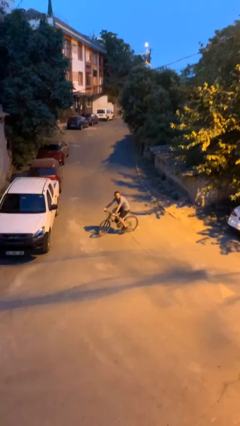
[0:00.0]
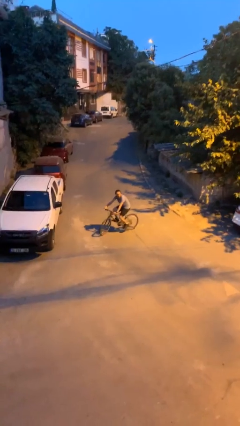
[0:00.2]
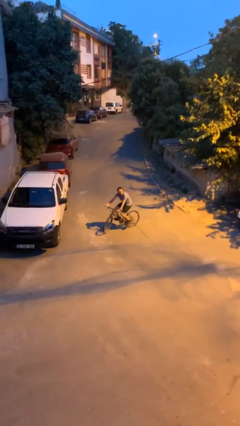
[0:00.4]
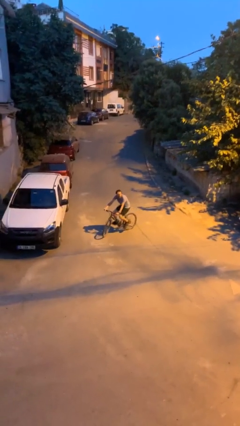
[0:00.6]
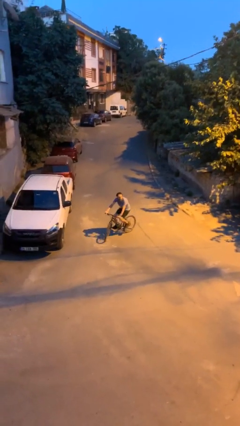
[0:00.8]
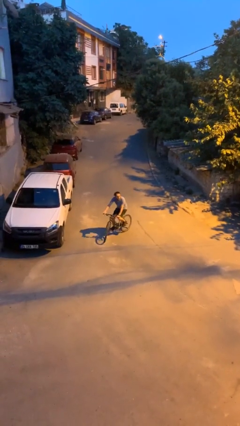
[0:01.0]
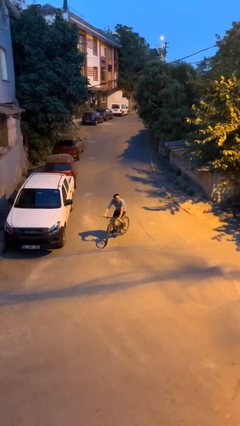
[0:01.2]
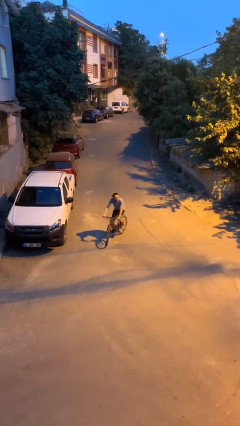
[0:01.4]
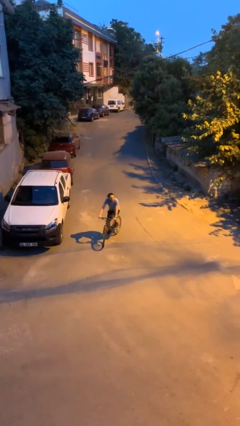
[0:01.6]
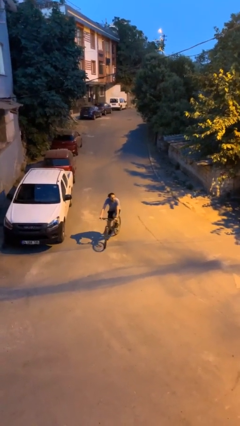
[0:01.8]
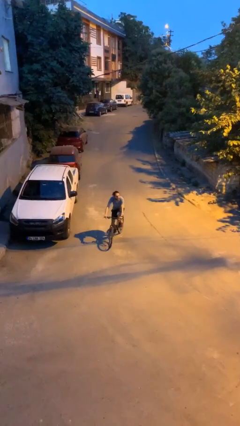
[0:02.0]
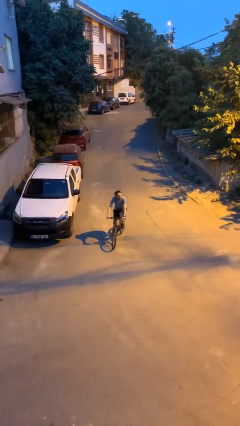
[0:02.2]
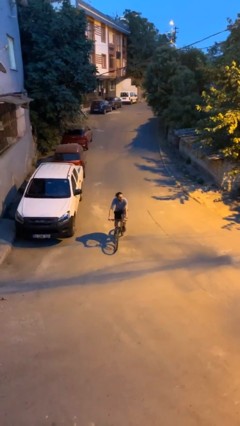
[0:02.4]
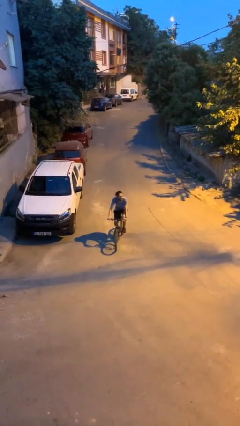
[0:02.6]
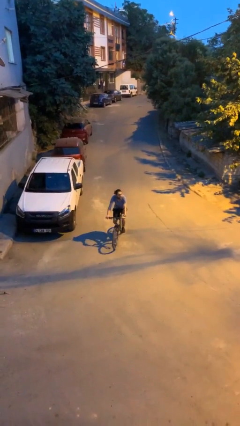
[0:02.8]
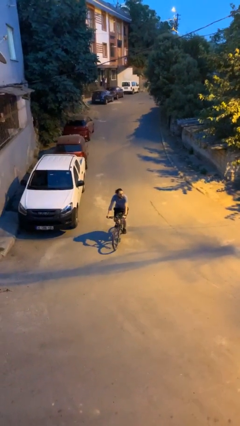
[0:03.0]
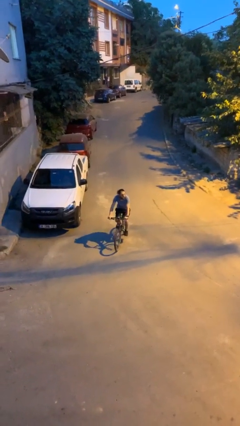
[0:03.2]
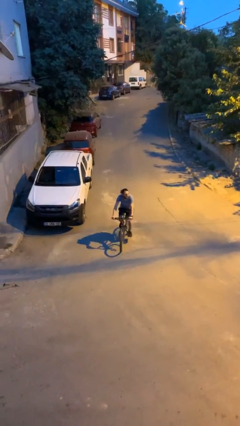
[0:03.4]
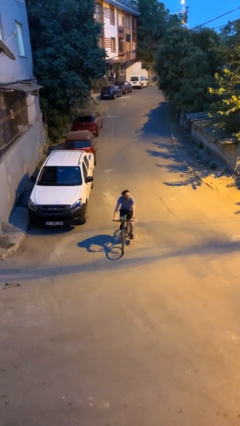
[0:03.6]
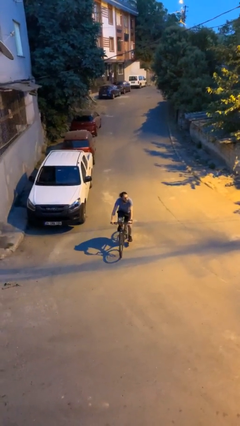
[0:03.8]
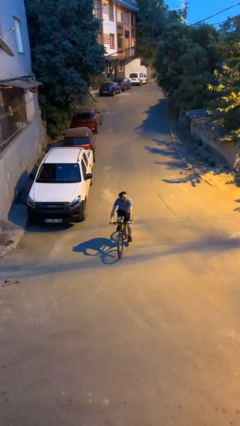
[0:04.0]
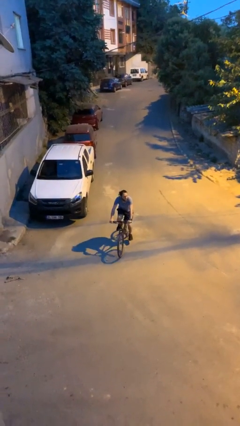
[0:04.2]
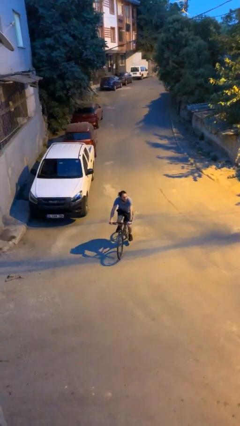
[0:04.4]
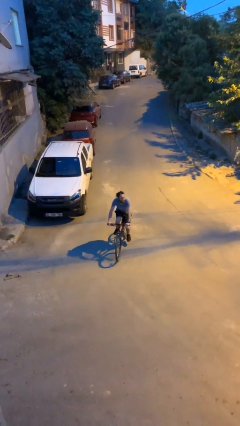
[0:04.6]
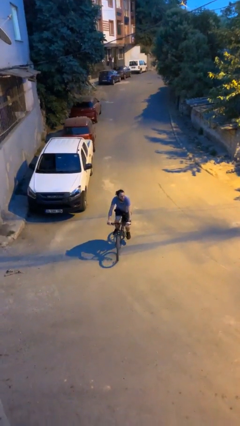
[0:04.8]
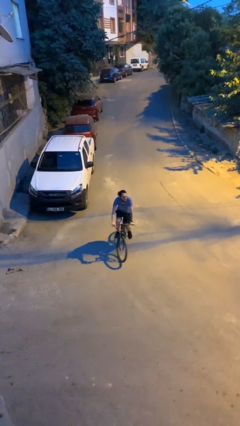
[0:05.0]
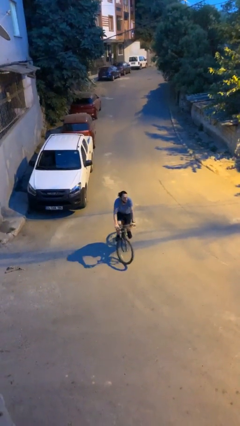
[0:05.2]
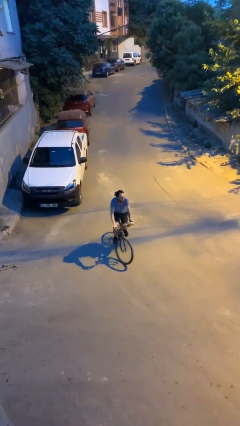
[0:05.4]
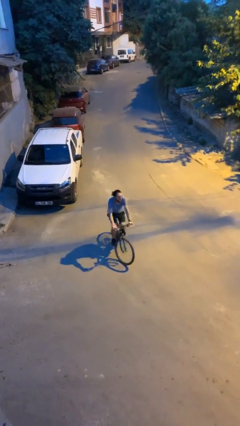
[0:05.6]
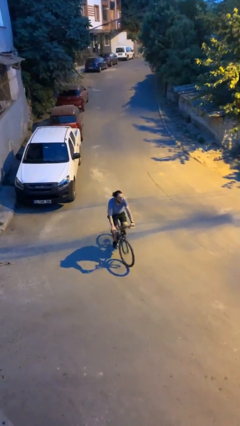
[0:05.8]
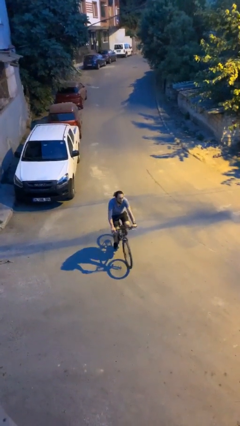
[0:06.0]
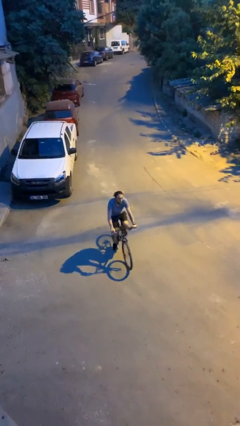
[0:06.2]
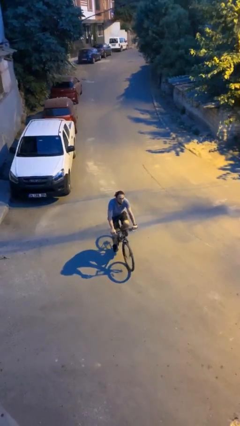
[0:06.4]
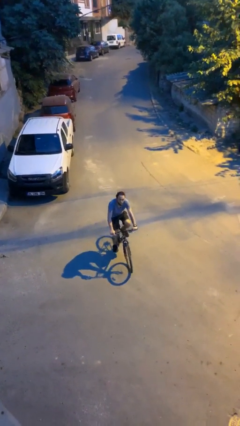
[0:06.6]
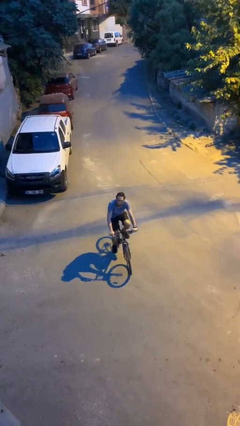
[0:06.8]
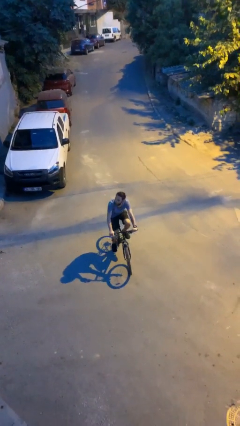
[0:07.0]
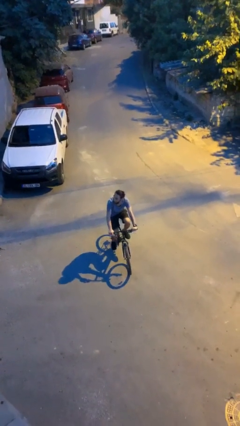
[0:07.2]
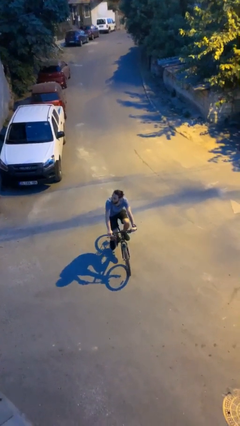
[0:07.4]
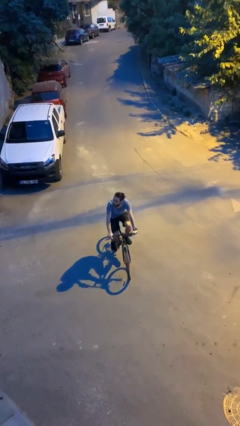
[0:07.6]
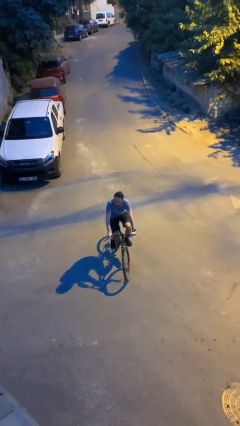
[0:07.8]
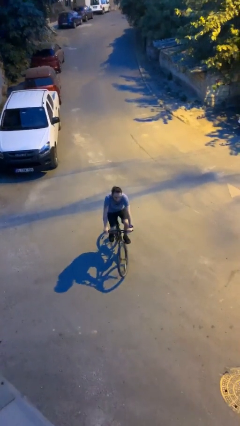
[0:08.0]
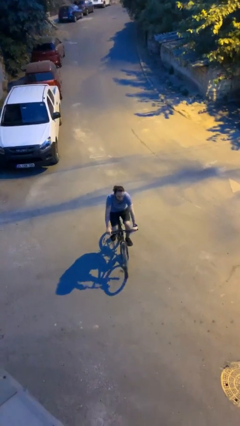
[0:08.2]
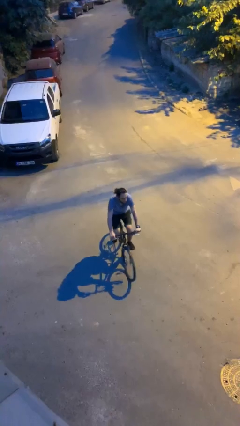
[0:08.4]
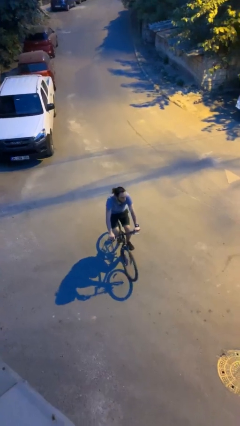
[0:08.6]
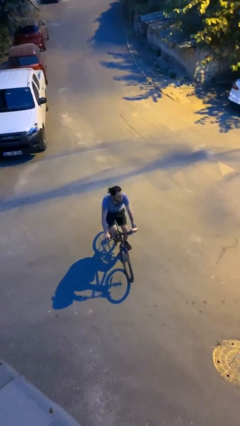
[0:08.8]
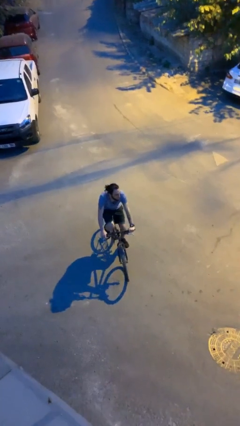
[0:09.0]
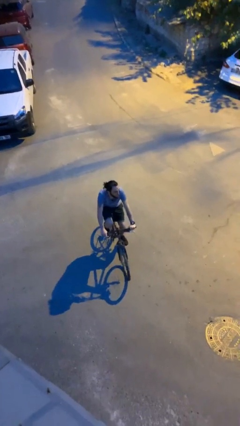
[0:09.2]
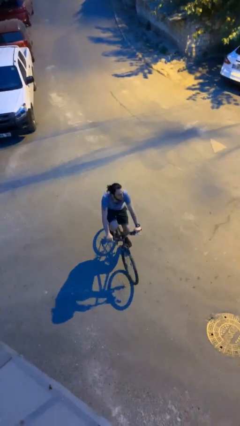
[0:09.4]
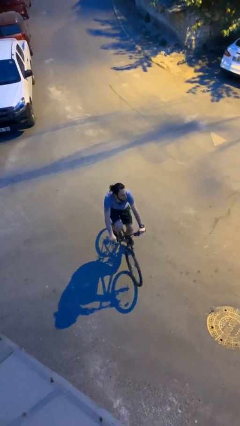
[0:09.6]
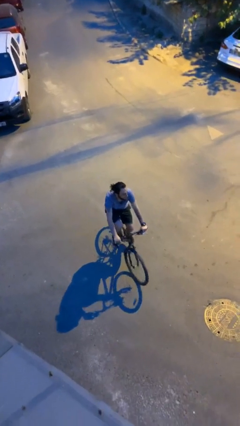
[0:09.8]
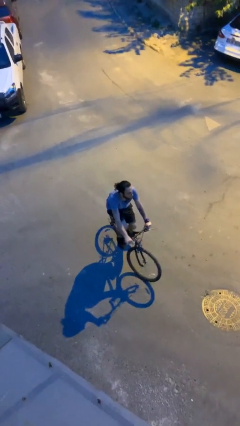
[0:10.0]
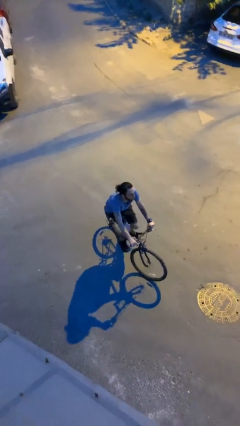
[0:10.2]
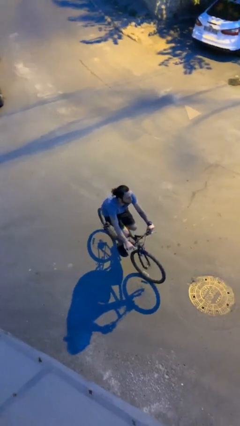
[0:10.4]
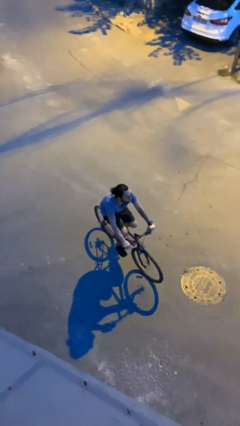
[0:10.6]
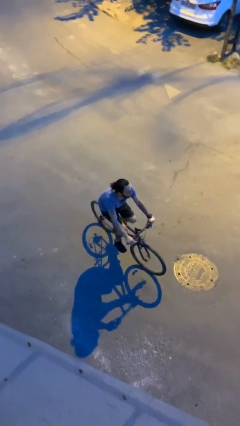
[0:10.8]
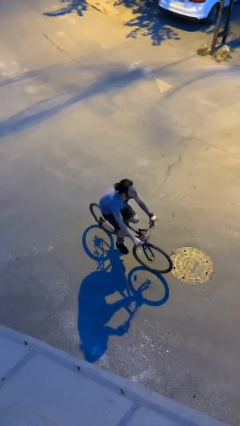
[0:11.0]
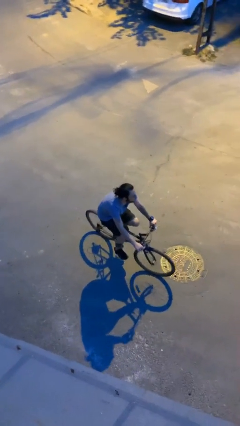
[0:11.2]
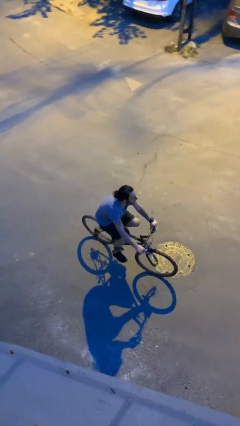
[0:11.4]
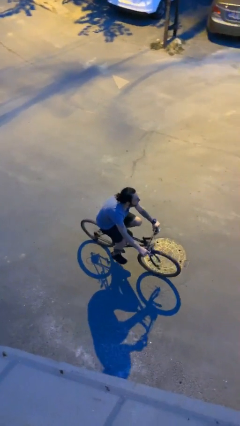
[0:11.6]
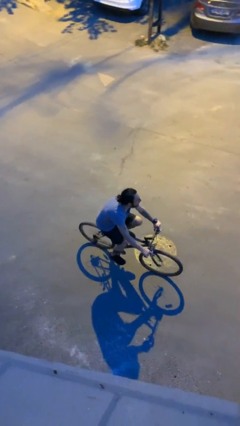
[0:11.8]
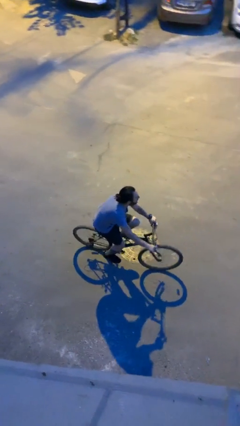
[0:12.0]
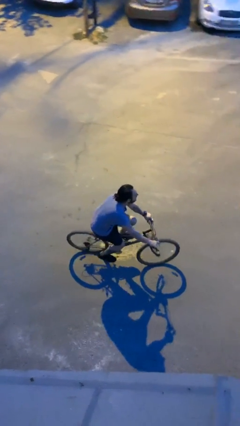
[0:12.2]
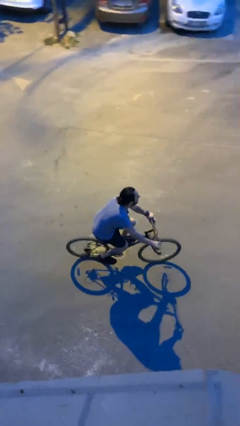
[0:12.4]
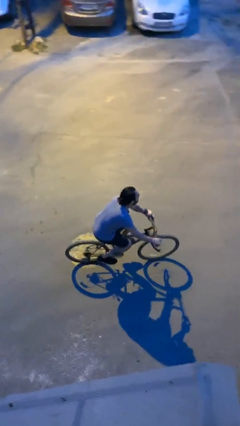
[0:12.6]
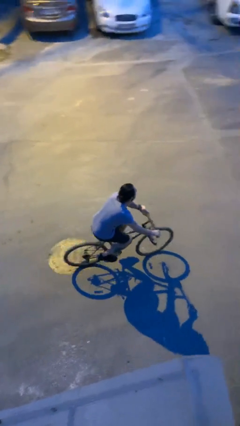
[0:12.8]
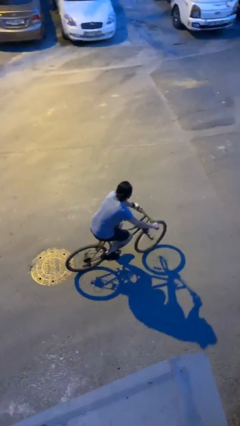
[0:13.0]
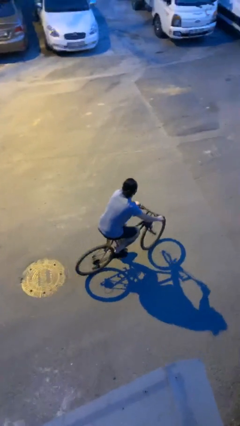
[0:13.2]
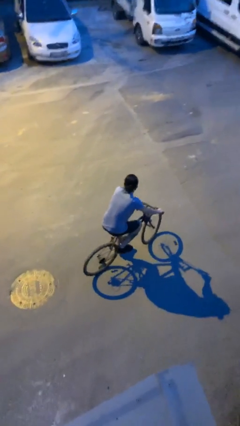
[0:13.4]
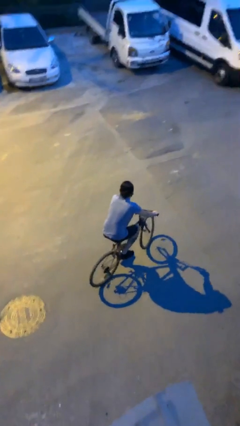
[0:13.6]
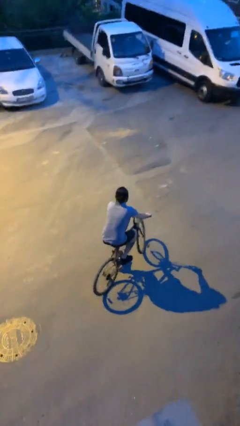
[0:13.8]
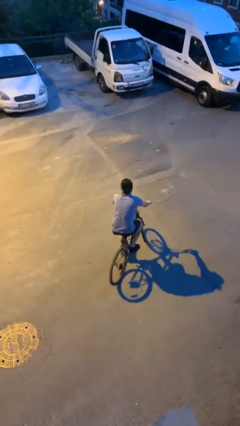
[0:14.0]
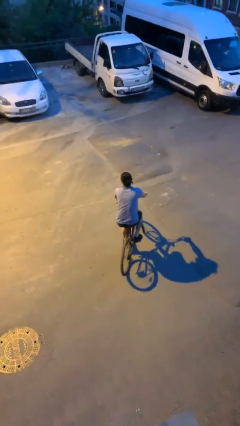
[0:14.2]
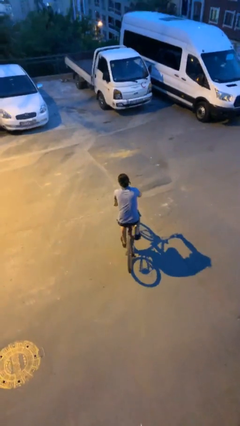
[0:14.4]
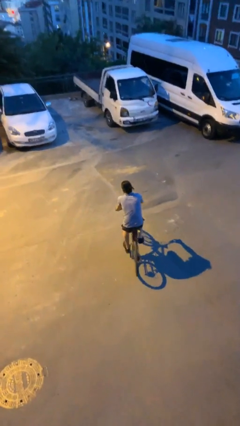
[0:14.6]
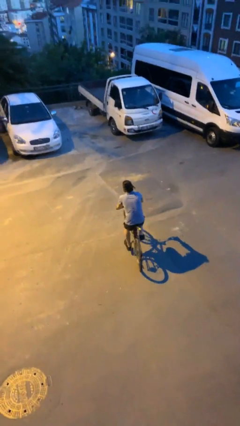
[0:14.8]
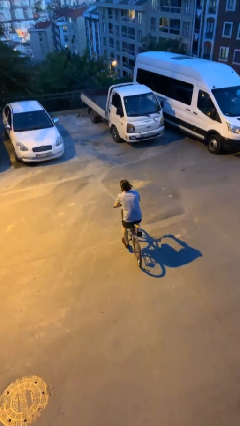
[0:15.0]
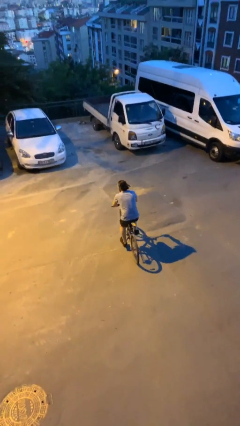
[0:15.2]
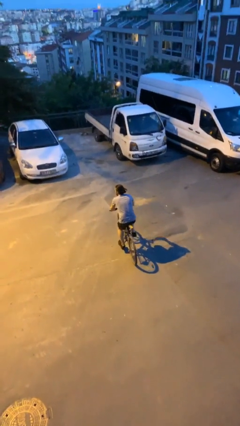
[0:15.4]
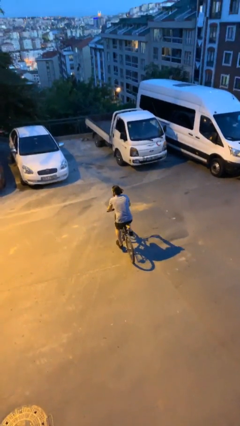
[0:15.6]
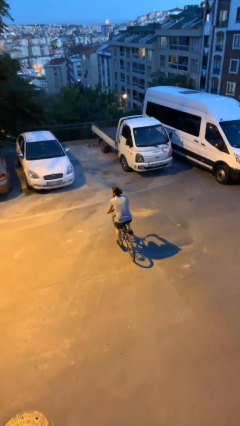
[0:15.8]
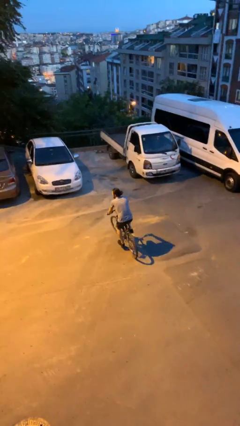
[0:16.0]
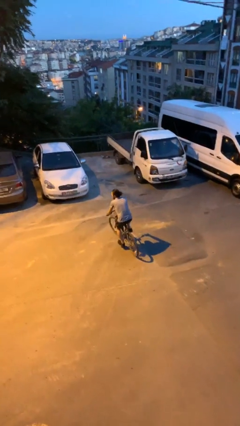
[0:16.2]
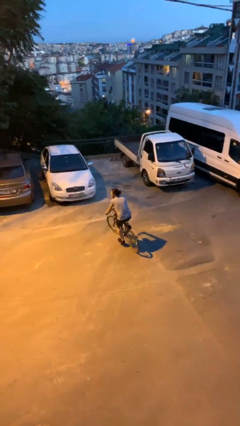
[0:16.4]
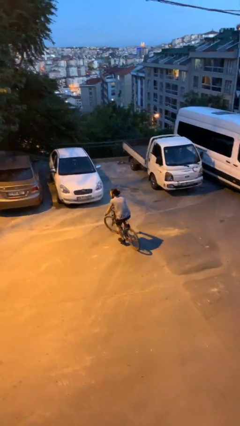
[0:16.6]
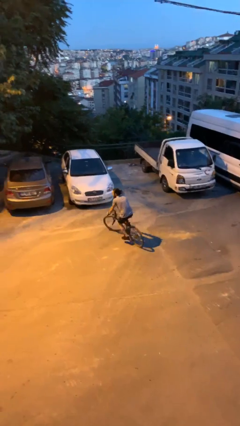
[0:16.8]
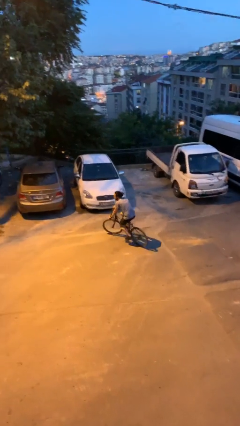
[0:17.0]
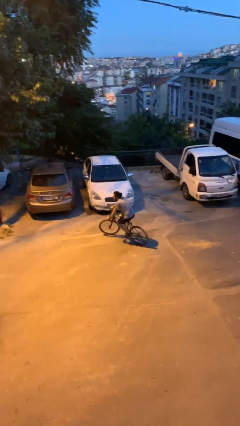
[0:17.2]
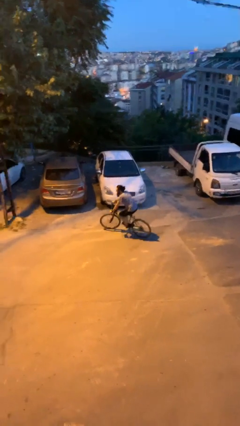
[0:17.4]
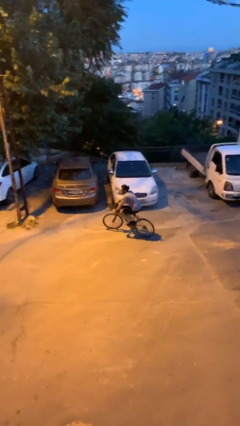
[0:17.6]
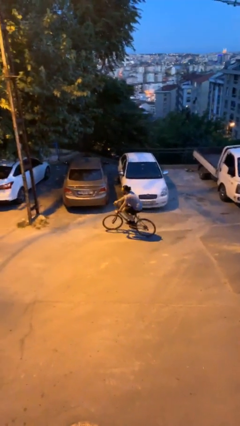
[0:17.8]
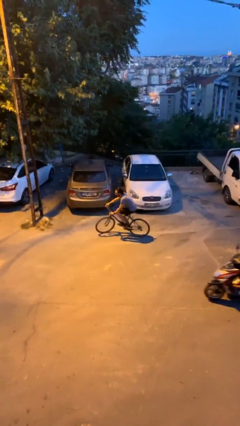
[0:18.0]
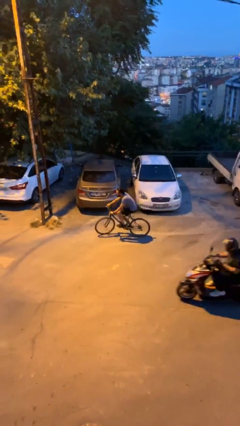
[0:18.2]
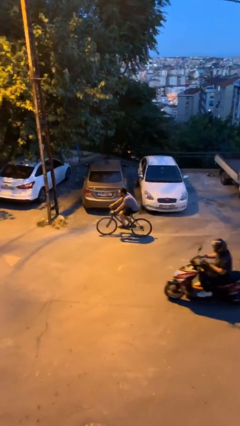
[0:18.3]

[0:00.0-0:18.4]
person rides bicycle
